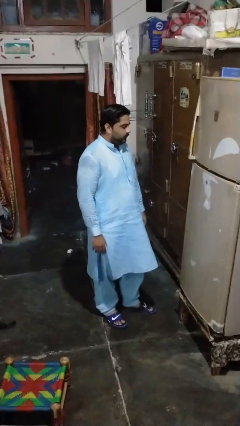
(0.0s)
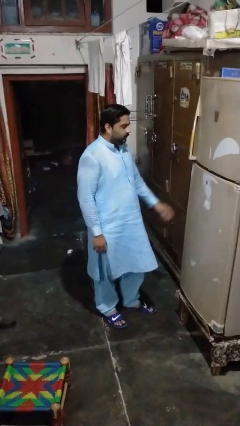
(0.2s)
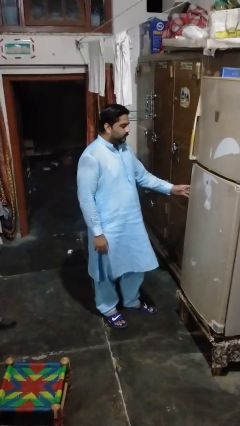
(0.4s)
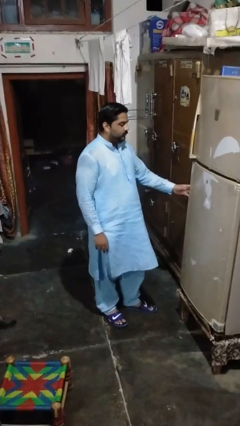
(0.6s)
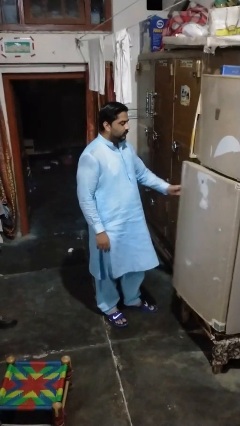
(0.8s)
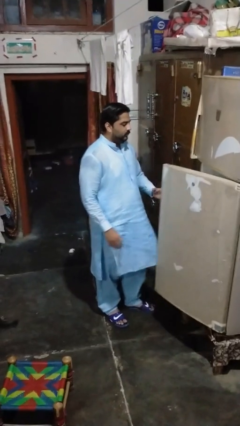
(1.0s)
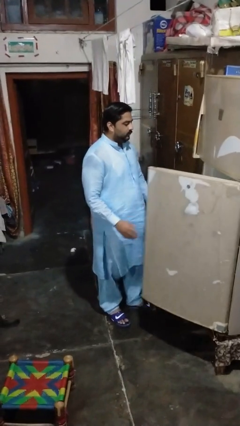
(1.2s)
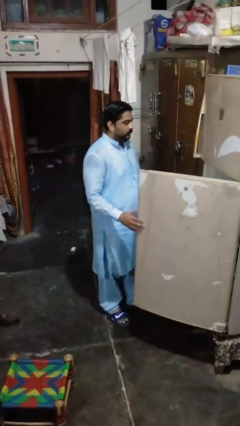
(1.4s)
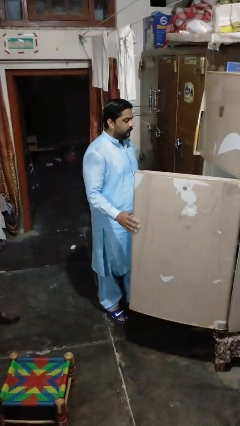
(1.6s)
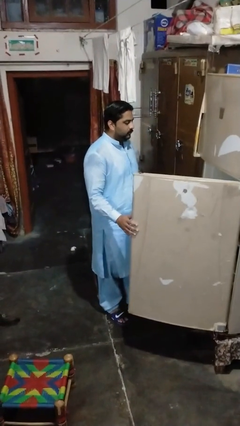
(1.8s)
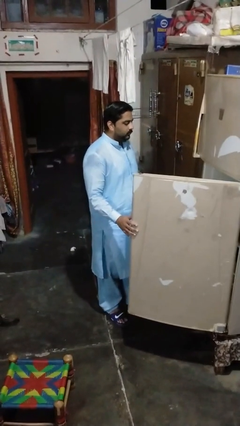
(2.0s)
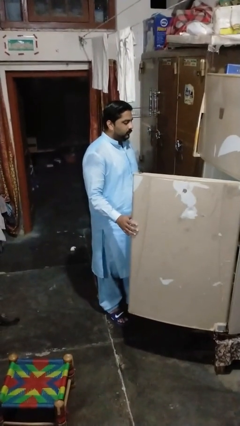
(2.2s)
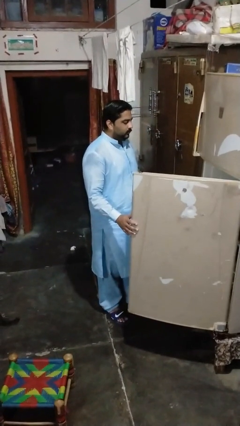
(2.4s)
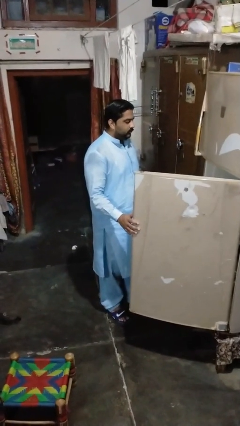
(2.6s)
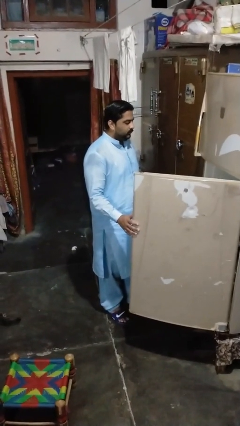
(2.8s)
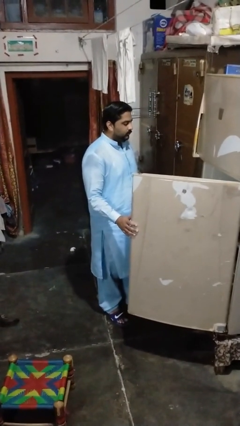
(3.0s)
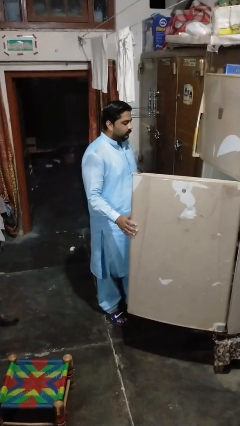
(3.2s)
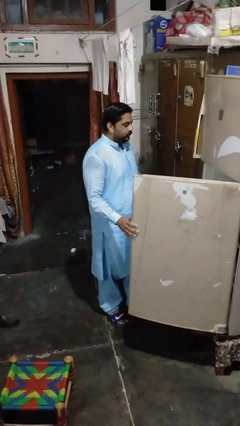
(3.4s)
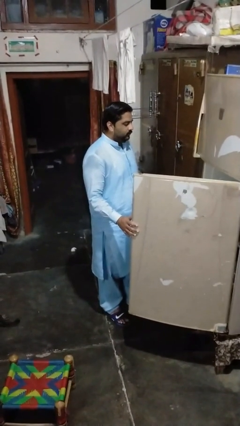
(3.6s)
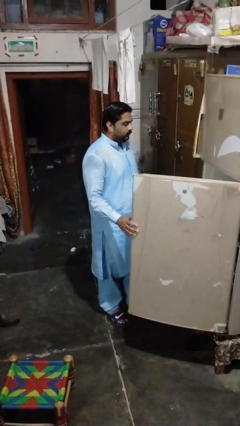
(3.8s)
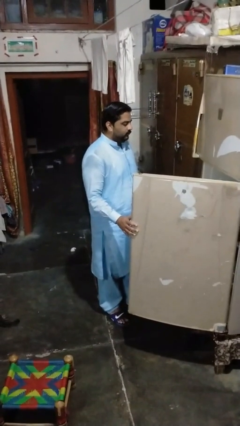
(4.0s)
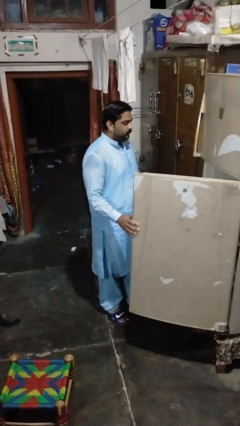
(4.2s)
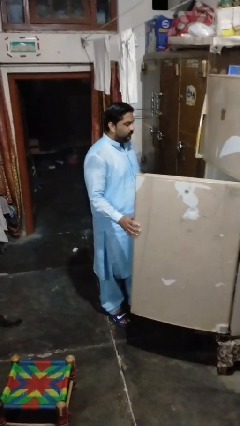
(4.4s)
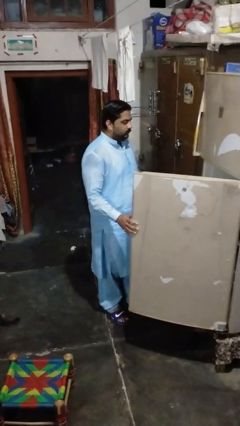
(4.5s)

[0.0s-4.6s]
person opens refrigerator

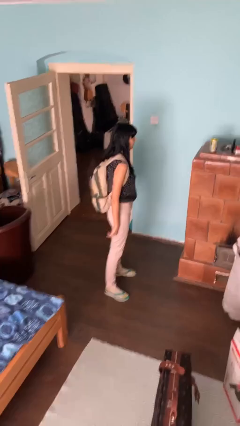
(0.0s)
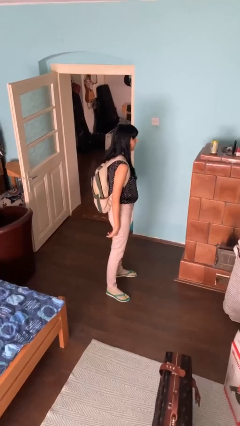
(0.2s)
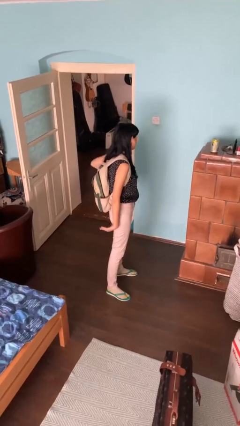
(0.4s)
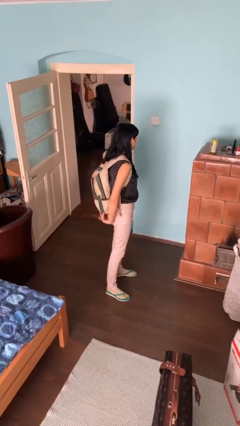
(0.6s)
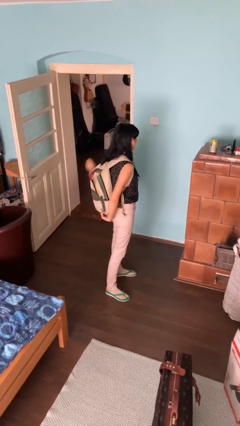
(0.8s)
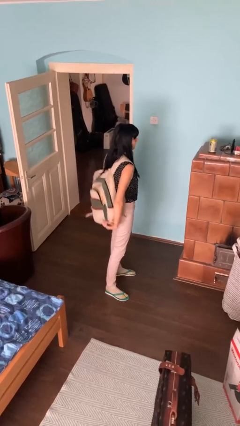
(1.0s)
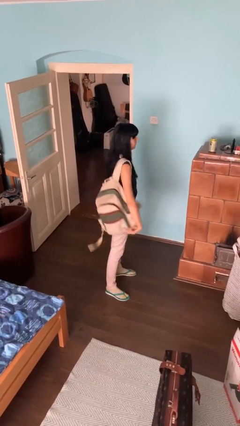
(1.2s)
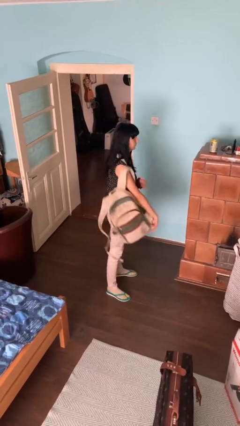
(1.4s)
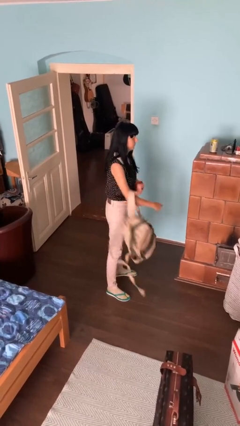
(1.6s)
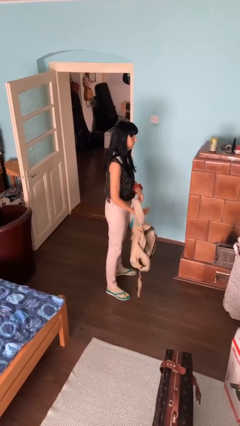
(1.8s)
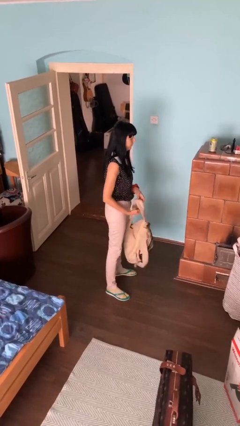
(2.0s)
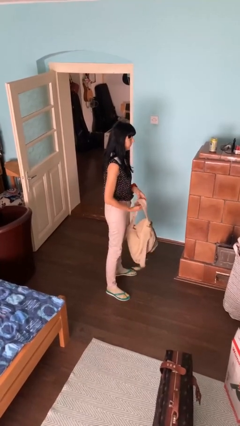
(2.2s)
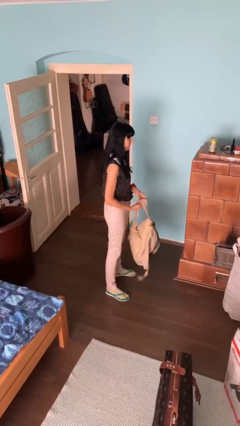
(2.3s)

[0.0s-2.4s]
person takes off backpack

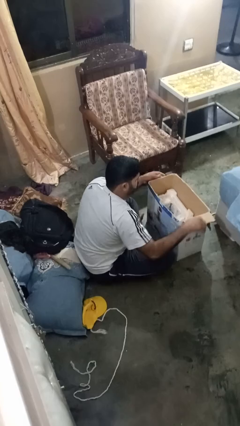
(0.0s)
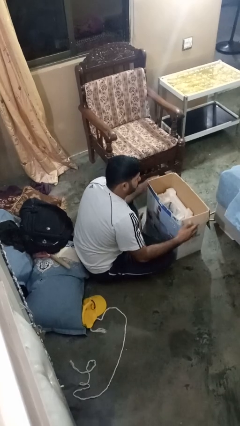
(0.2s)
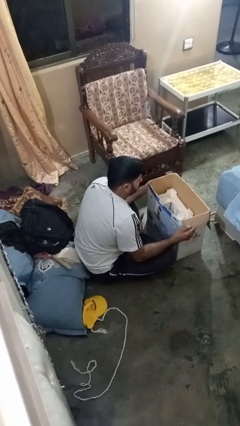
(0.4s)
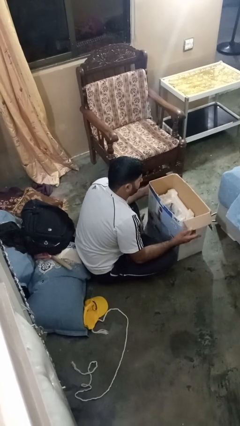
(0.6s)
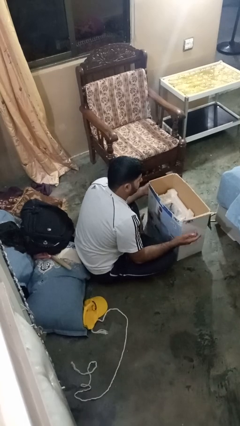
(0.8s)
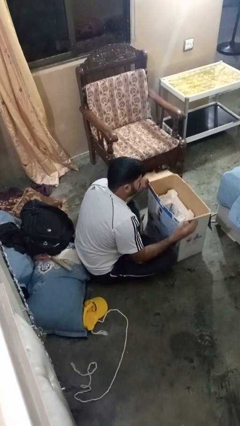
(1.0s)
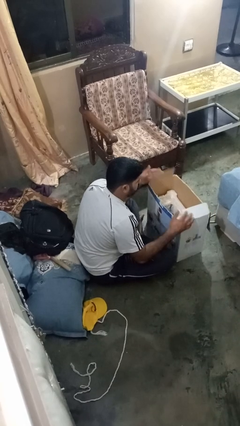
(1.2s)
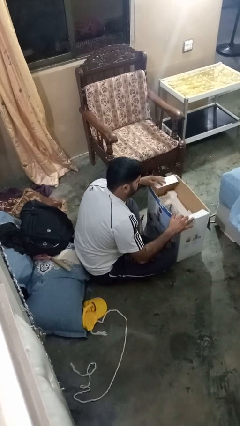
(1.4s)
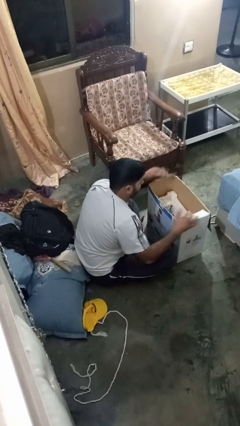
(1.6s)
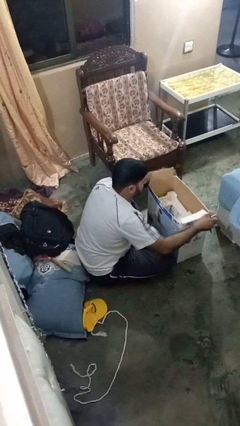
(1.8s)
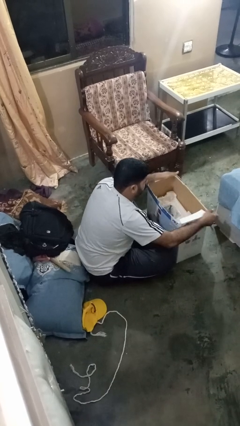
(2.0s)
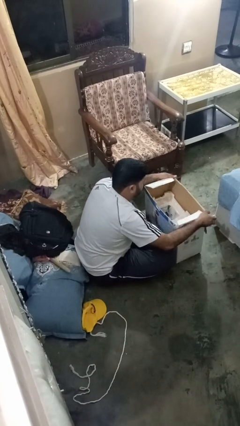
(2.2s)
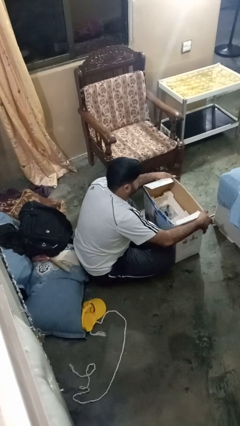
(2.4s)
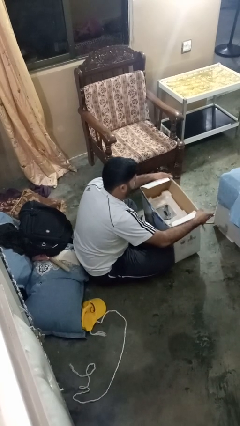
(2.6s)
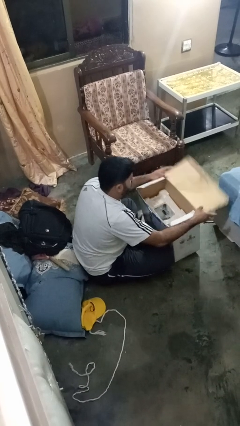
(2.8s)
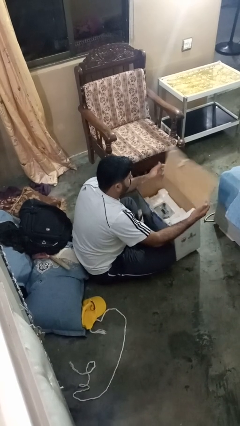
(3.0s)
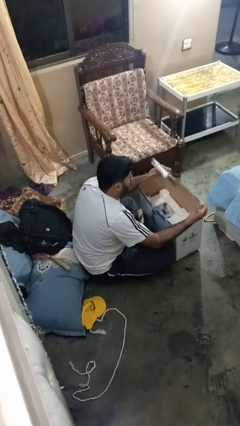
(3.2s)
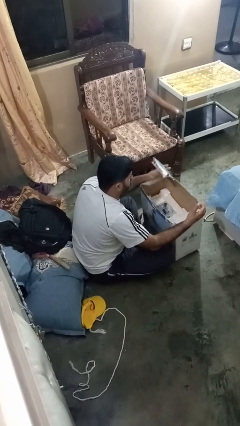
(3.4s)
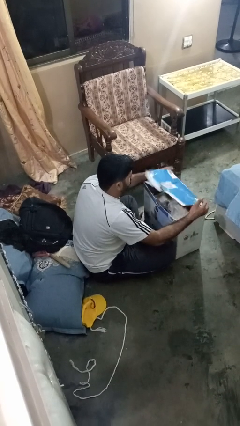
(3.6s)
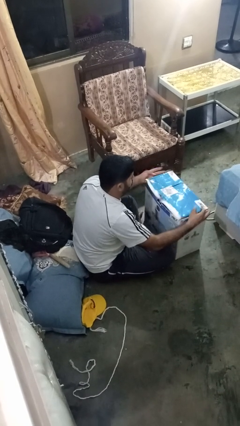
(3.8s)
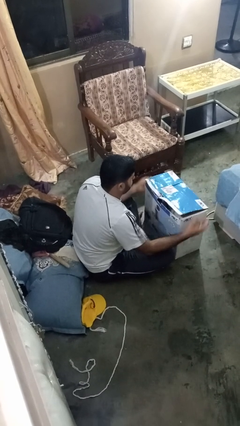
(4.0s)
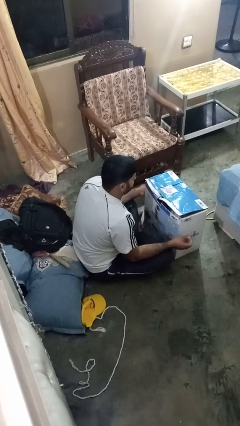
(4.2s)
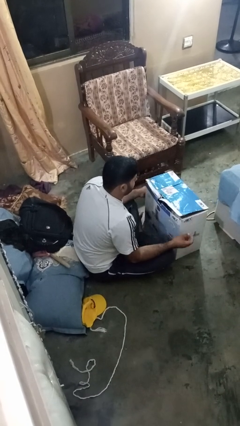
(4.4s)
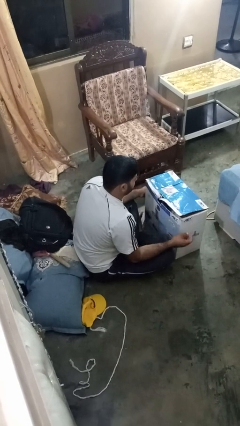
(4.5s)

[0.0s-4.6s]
person closes box

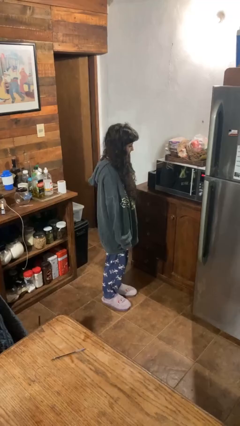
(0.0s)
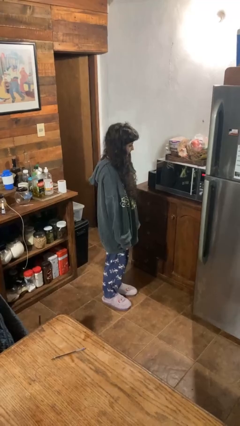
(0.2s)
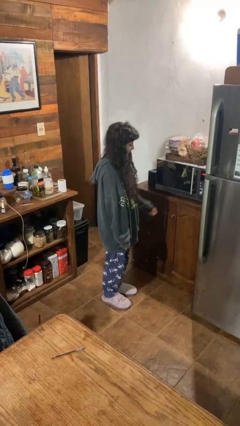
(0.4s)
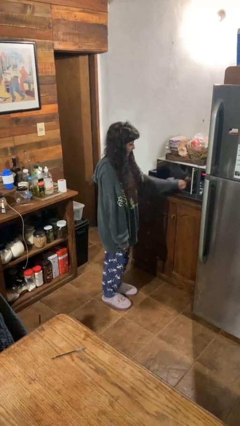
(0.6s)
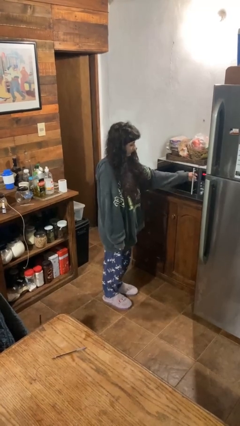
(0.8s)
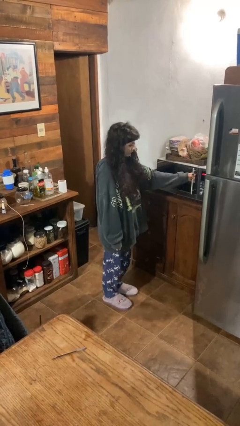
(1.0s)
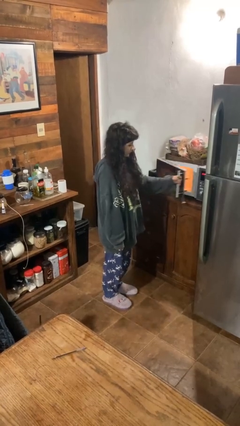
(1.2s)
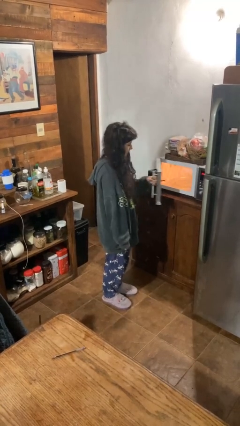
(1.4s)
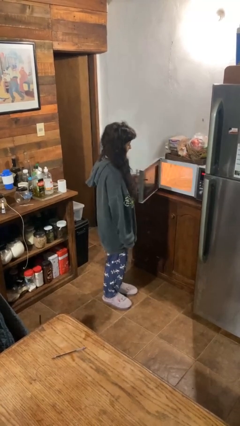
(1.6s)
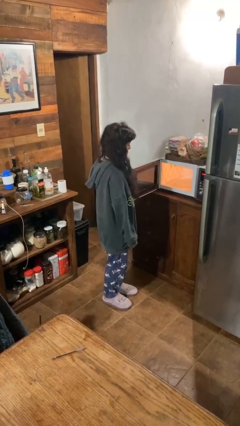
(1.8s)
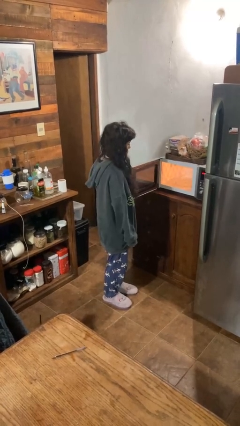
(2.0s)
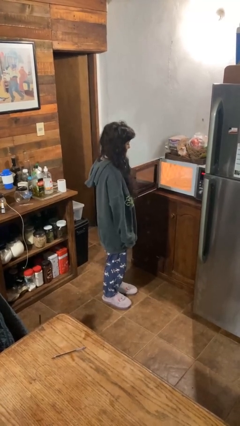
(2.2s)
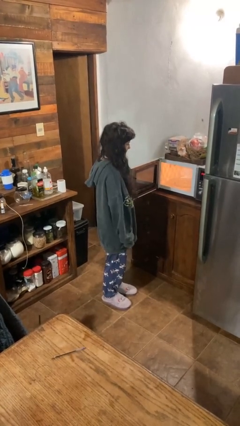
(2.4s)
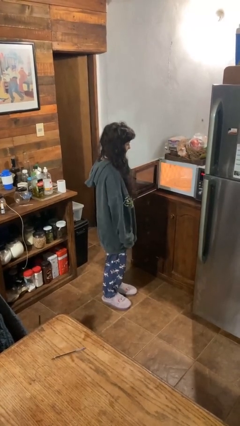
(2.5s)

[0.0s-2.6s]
person opens microwave

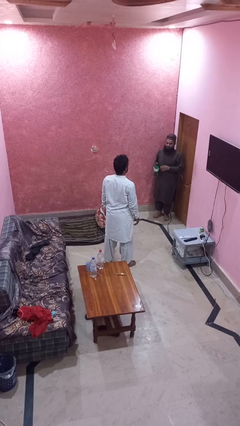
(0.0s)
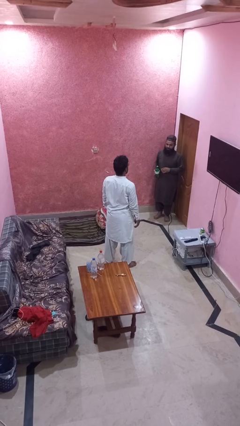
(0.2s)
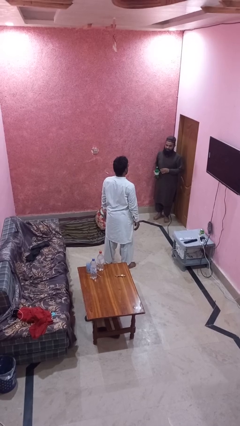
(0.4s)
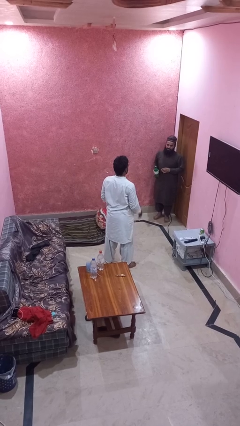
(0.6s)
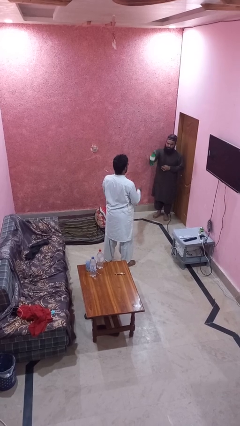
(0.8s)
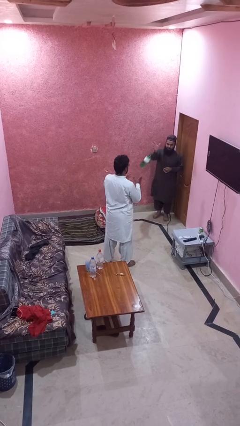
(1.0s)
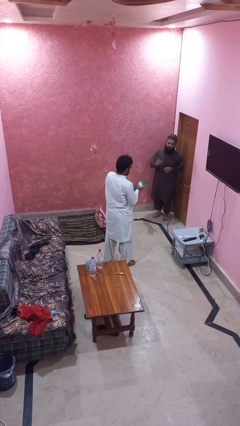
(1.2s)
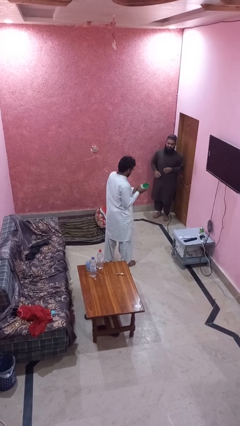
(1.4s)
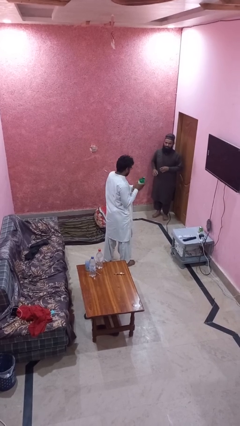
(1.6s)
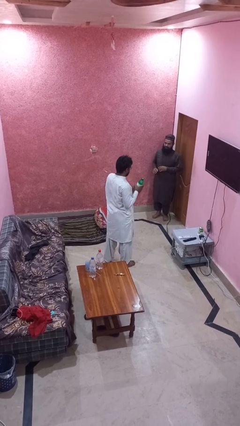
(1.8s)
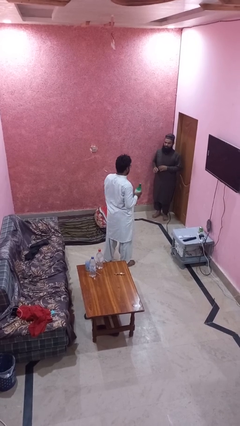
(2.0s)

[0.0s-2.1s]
person catches object from person

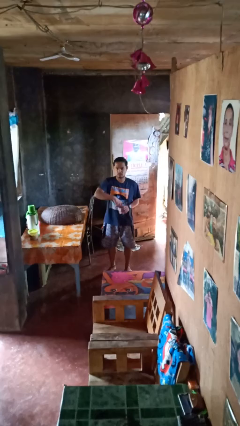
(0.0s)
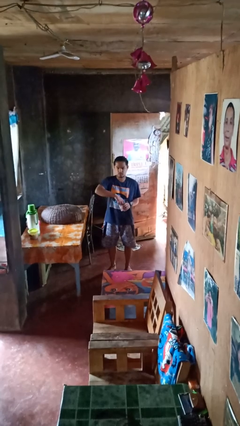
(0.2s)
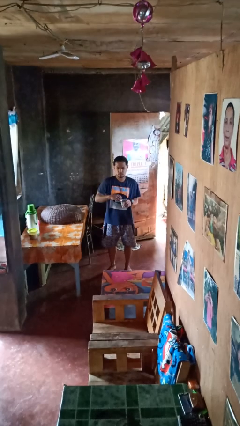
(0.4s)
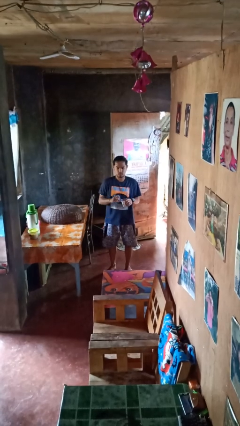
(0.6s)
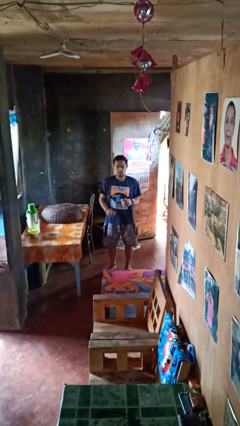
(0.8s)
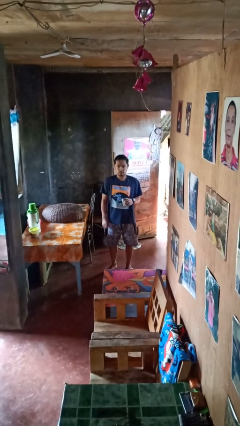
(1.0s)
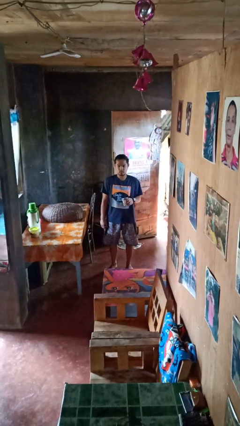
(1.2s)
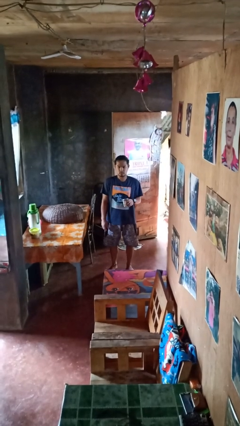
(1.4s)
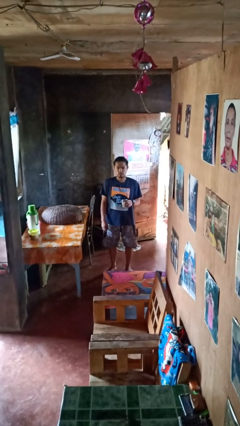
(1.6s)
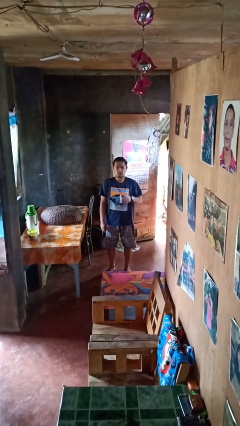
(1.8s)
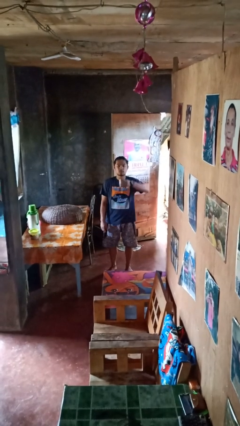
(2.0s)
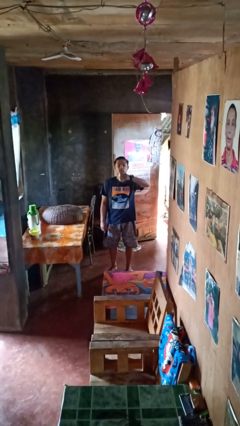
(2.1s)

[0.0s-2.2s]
person opens beverage can
